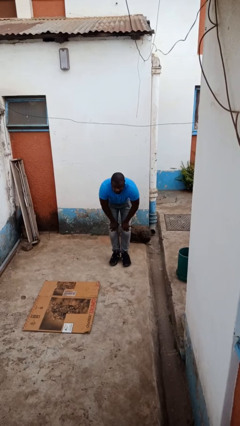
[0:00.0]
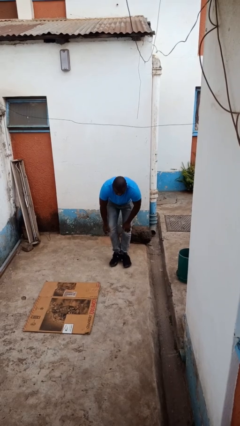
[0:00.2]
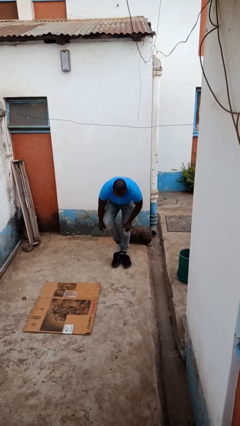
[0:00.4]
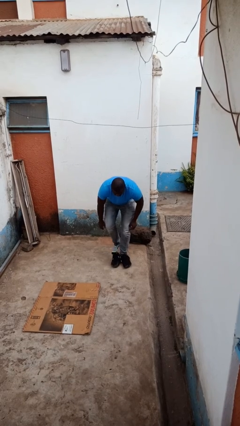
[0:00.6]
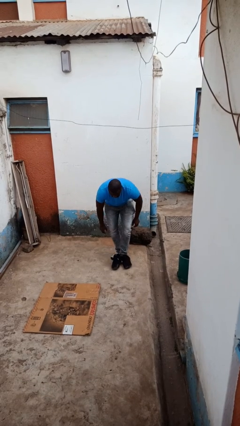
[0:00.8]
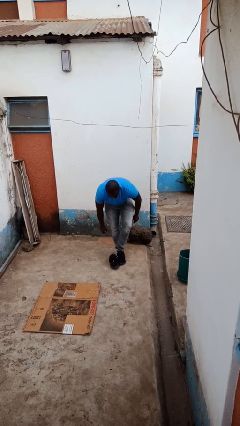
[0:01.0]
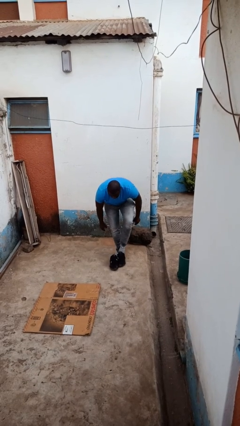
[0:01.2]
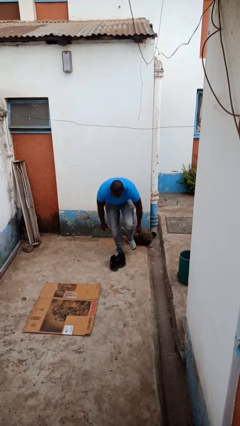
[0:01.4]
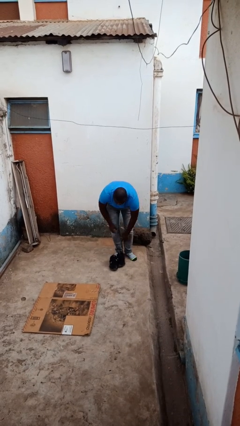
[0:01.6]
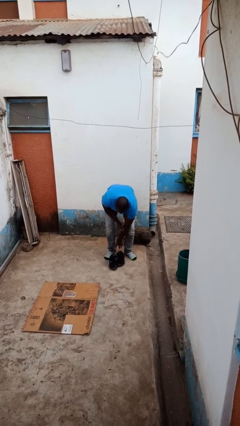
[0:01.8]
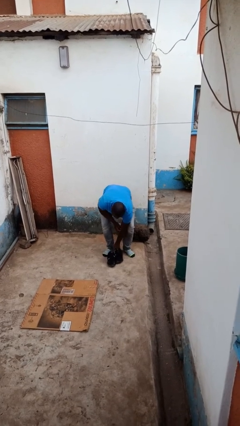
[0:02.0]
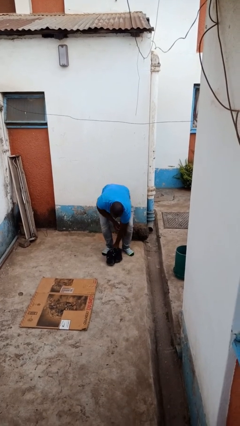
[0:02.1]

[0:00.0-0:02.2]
person takes off shoes

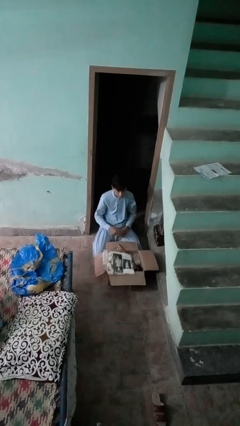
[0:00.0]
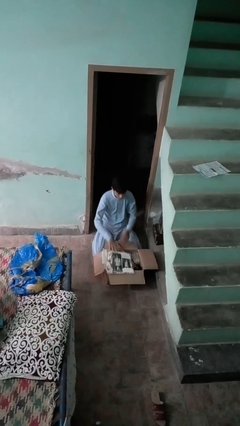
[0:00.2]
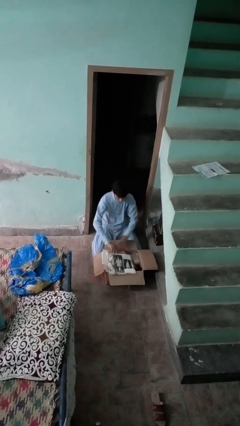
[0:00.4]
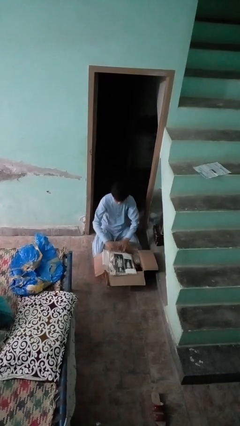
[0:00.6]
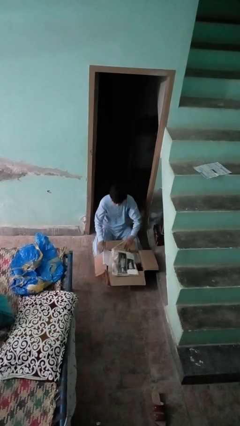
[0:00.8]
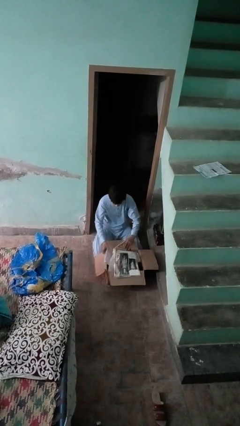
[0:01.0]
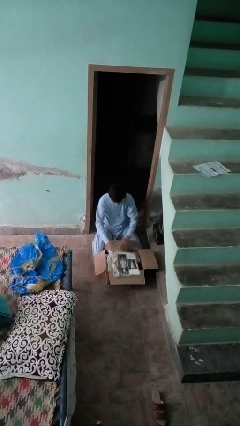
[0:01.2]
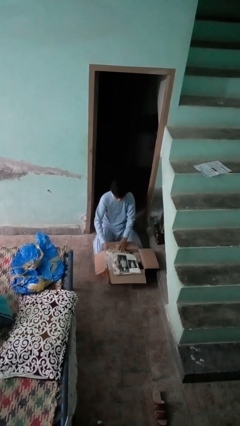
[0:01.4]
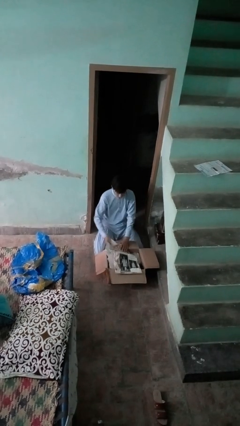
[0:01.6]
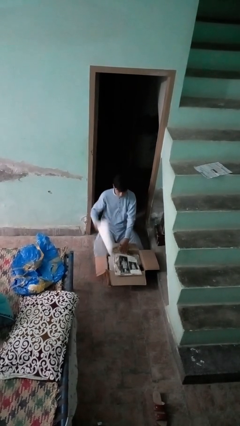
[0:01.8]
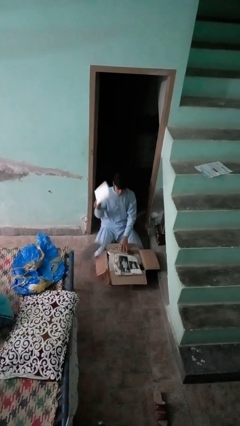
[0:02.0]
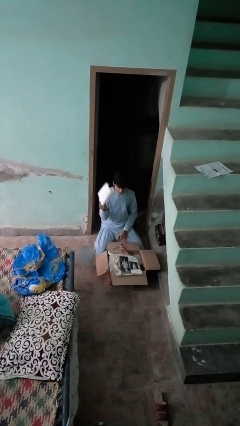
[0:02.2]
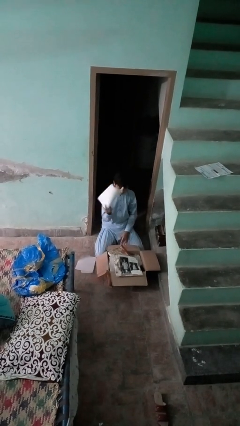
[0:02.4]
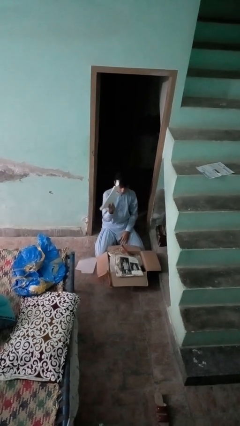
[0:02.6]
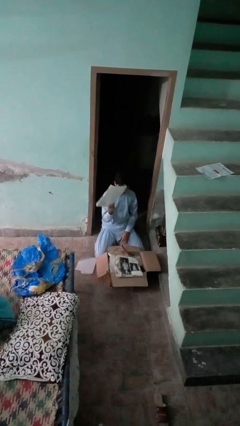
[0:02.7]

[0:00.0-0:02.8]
person takes object from box

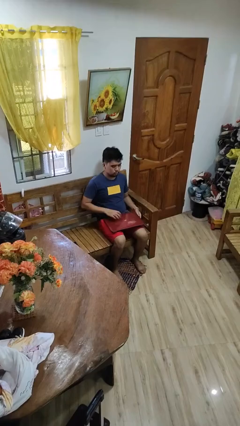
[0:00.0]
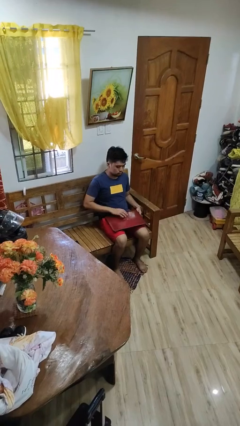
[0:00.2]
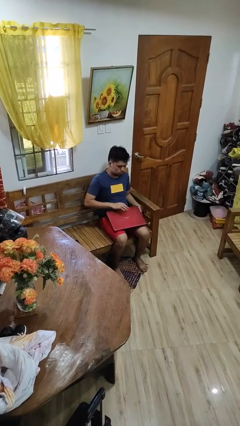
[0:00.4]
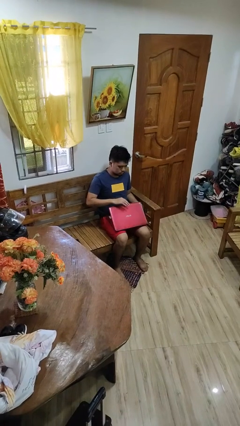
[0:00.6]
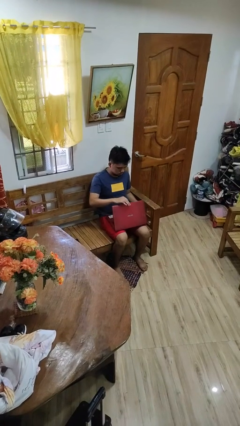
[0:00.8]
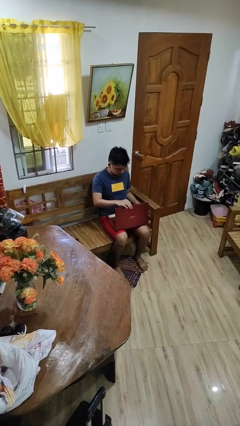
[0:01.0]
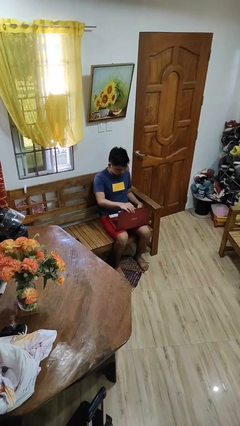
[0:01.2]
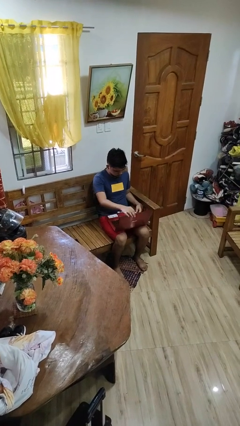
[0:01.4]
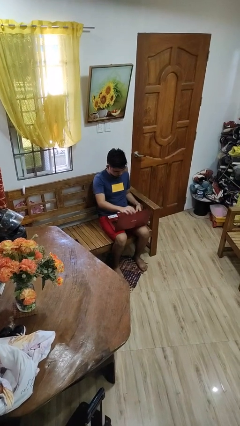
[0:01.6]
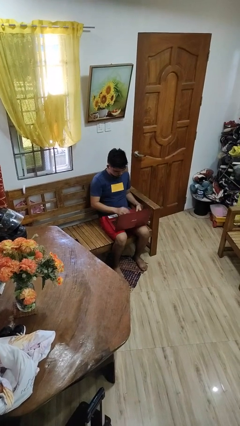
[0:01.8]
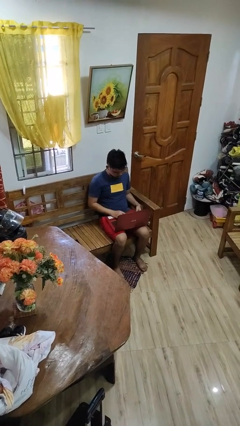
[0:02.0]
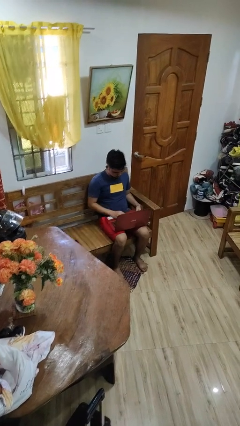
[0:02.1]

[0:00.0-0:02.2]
person opens laptop

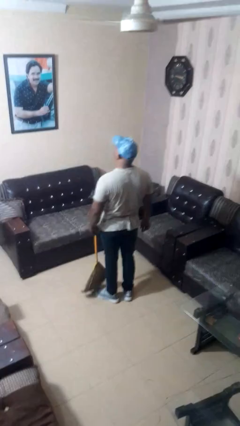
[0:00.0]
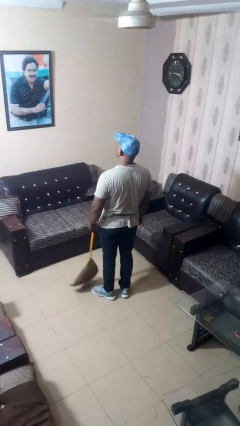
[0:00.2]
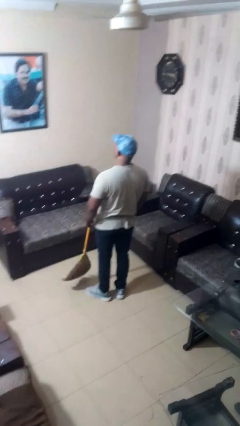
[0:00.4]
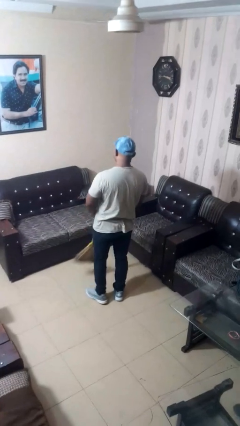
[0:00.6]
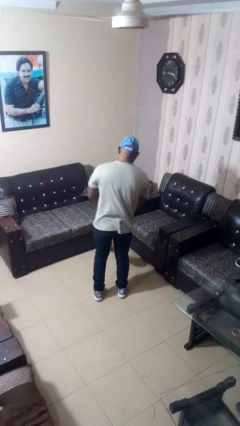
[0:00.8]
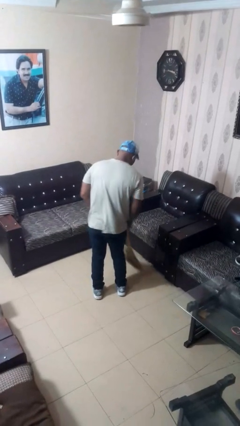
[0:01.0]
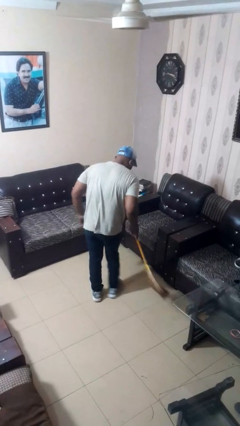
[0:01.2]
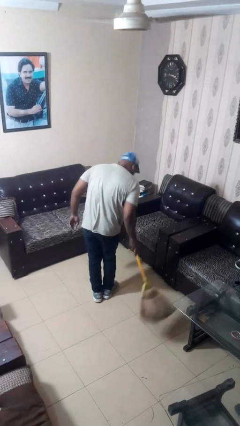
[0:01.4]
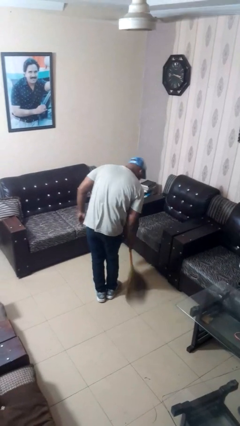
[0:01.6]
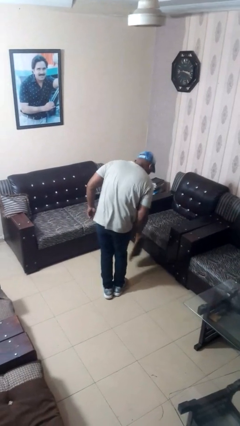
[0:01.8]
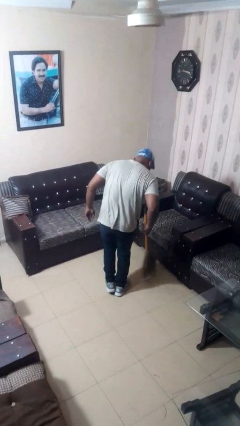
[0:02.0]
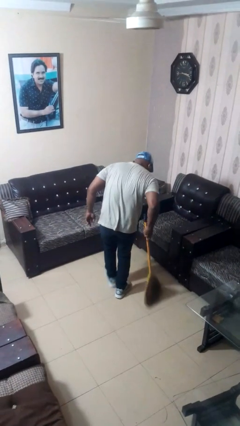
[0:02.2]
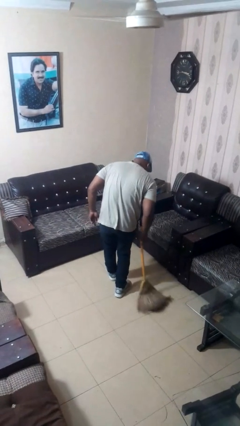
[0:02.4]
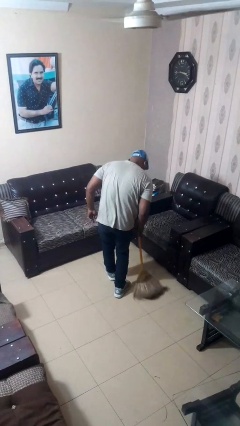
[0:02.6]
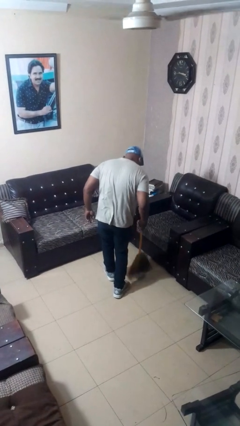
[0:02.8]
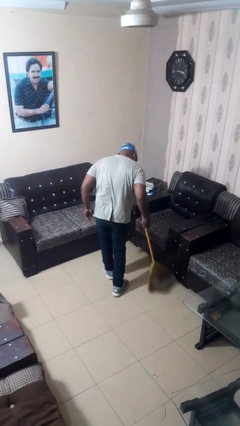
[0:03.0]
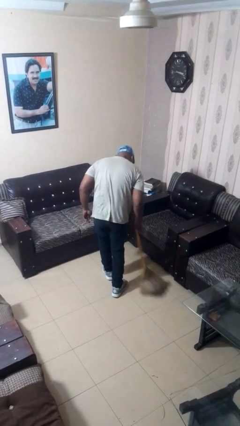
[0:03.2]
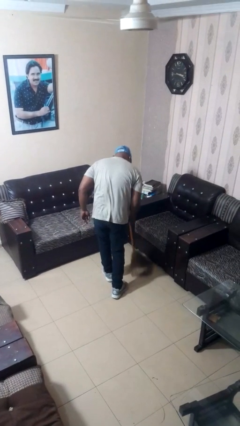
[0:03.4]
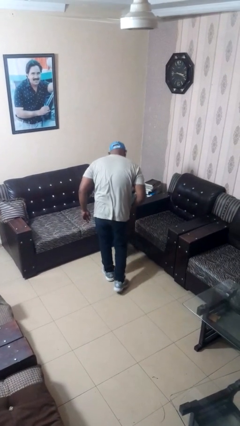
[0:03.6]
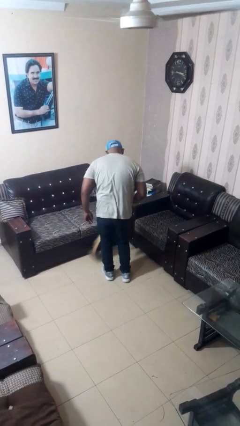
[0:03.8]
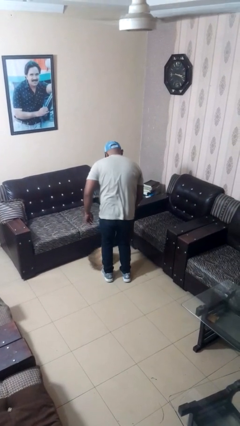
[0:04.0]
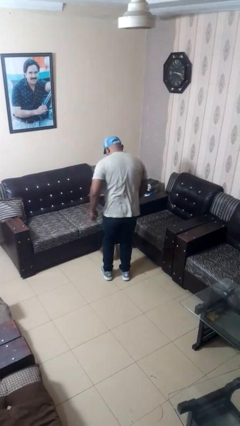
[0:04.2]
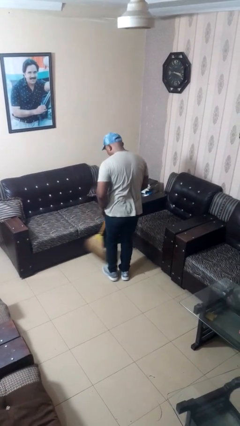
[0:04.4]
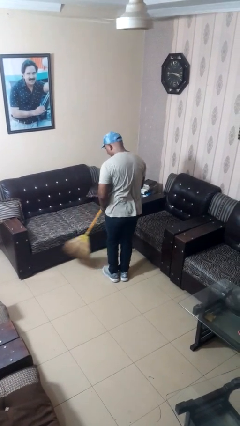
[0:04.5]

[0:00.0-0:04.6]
person sweeps floor

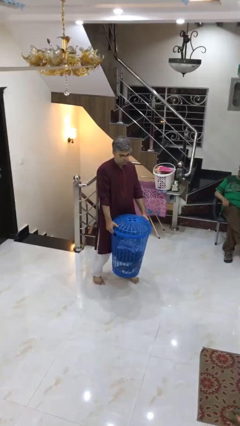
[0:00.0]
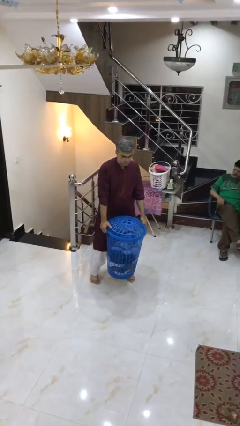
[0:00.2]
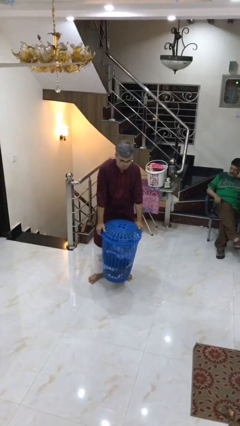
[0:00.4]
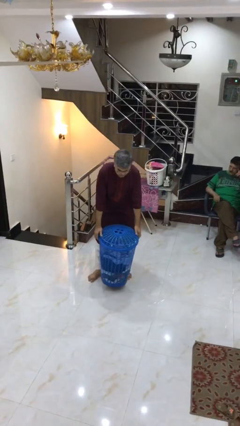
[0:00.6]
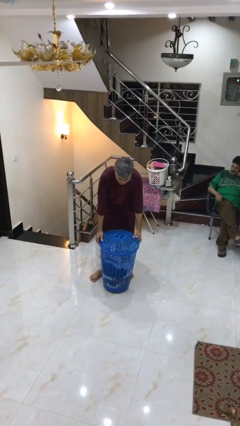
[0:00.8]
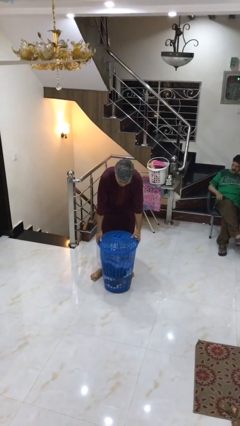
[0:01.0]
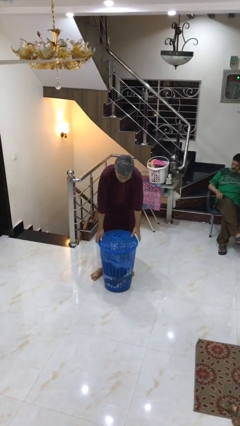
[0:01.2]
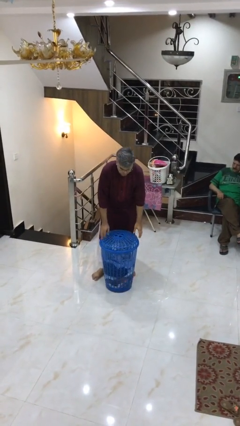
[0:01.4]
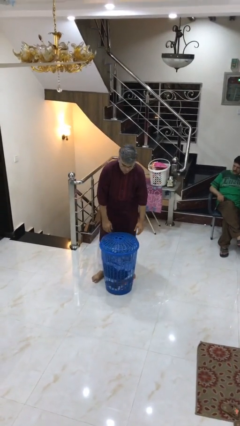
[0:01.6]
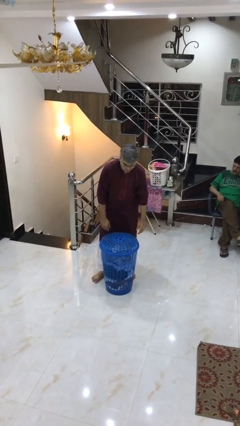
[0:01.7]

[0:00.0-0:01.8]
person puts down object on floor

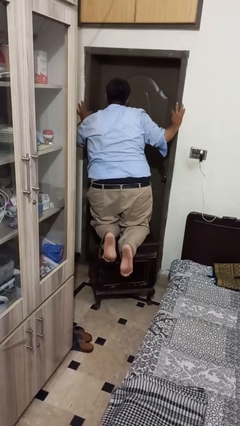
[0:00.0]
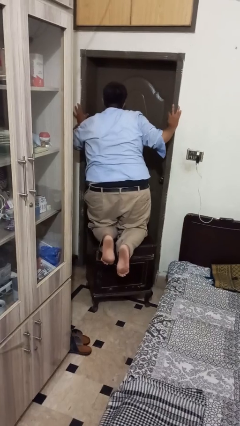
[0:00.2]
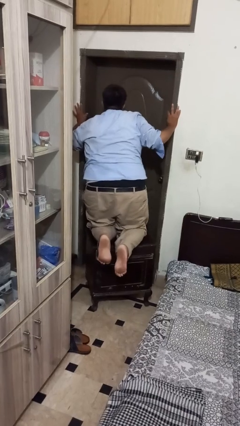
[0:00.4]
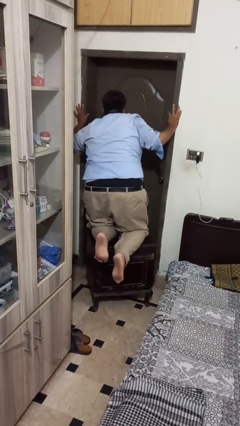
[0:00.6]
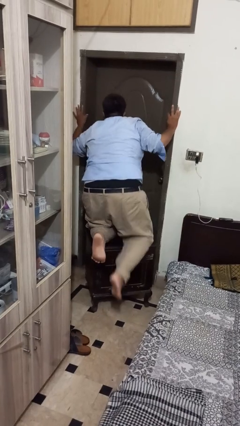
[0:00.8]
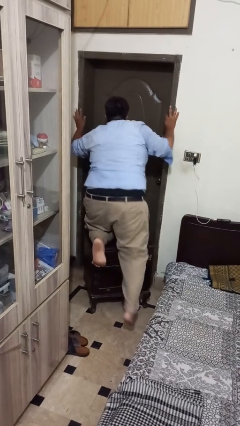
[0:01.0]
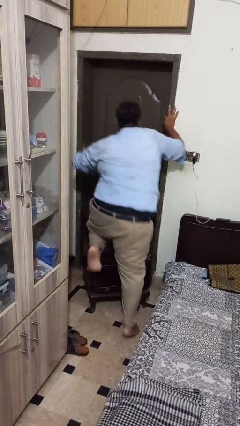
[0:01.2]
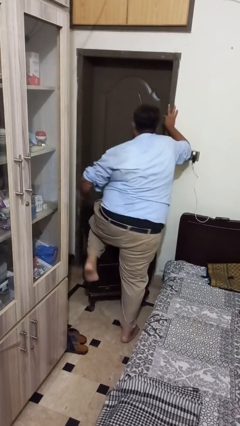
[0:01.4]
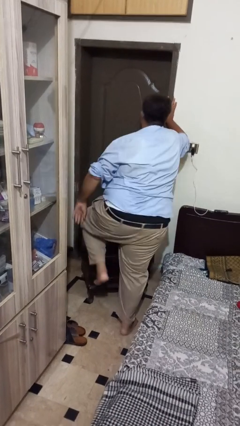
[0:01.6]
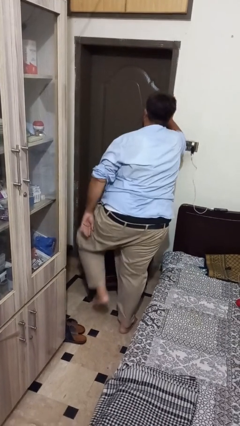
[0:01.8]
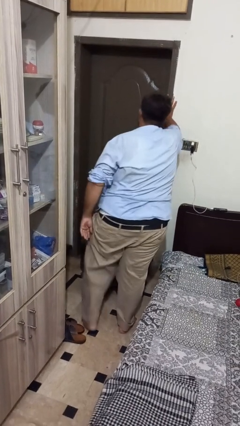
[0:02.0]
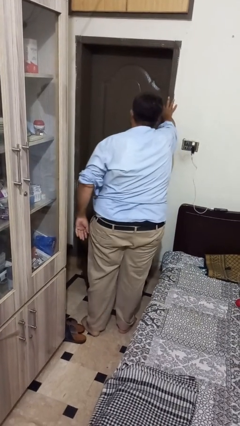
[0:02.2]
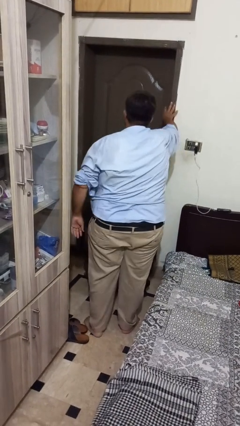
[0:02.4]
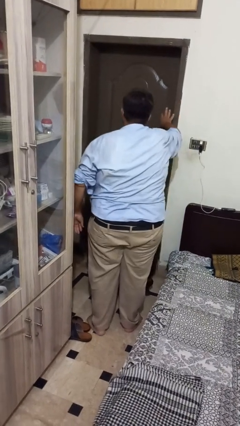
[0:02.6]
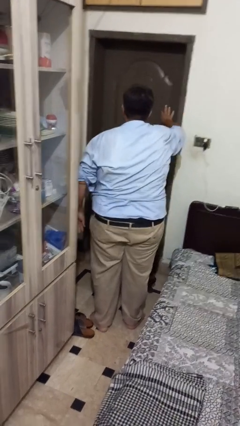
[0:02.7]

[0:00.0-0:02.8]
person climbs off table

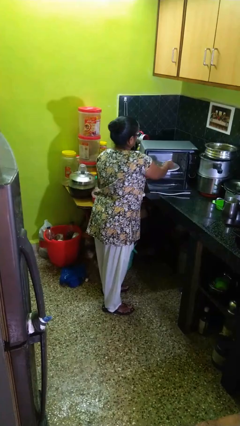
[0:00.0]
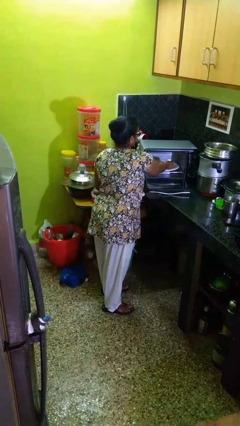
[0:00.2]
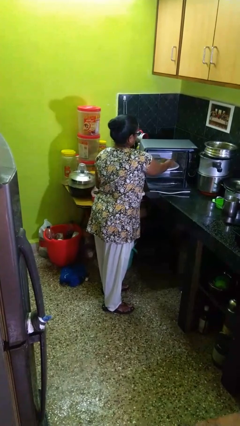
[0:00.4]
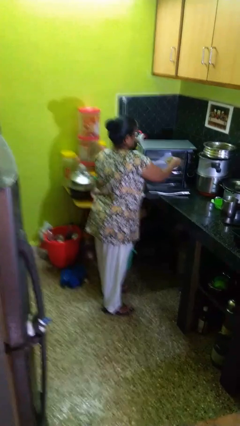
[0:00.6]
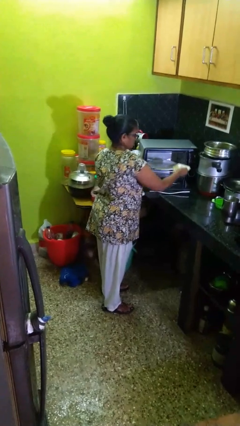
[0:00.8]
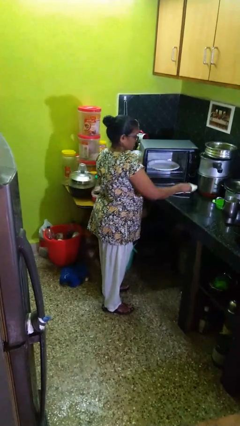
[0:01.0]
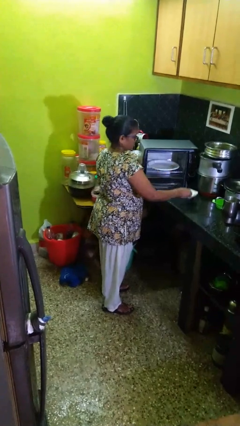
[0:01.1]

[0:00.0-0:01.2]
person takes object from microwave
